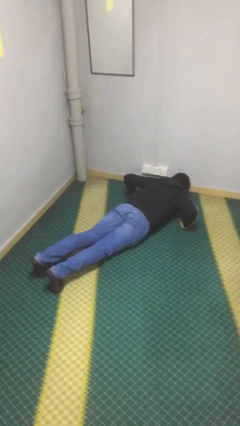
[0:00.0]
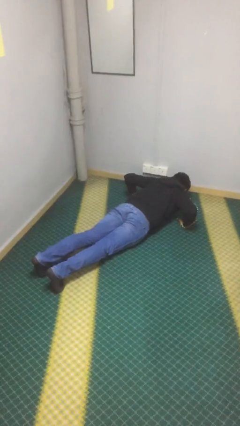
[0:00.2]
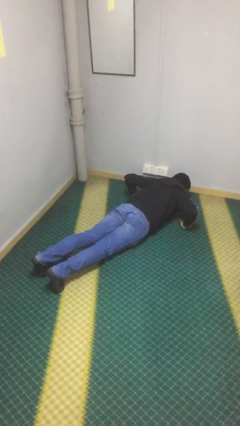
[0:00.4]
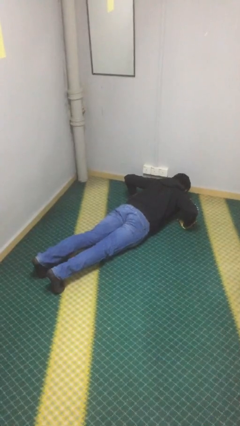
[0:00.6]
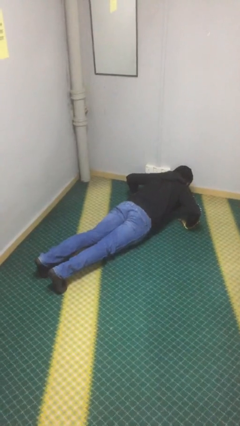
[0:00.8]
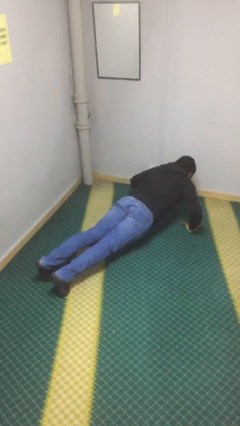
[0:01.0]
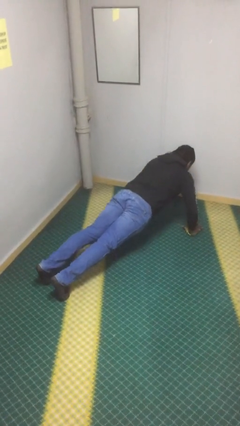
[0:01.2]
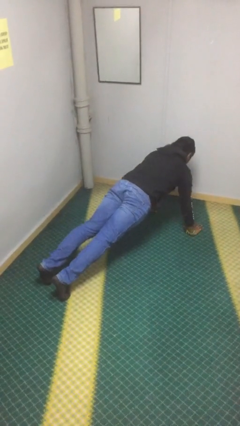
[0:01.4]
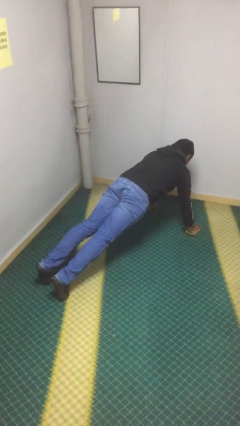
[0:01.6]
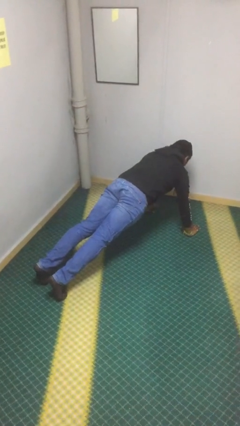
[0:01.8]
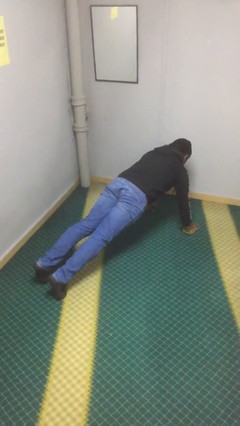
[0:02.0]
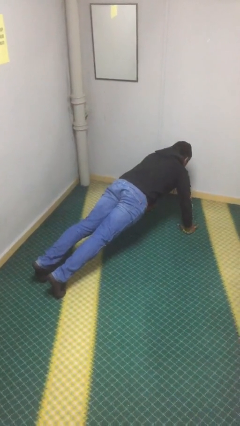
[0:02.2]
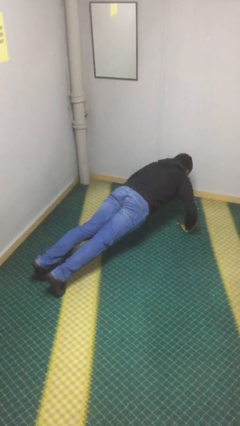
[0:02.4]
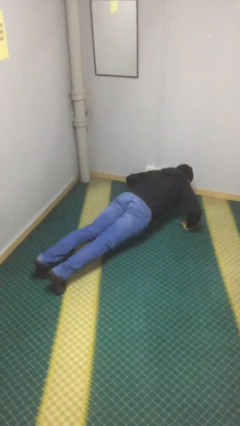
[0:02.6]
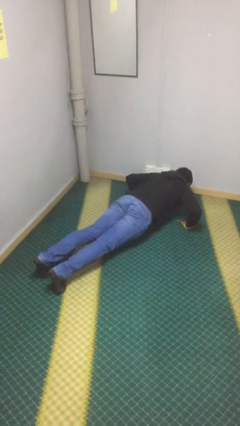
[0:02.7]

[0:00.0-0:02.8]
person exercises with pushup

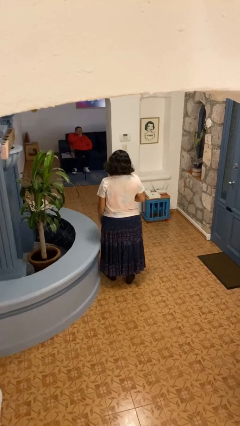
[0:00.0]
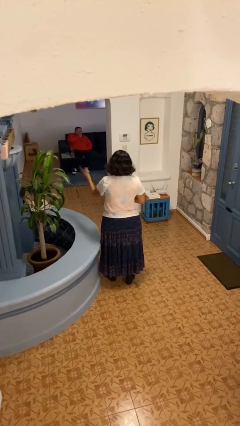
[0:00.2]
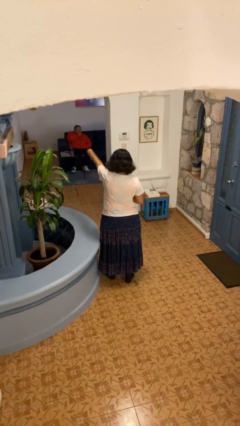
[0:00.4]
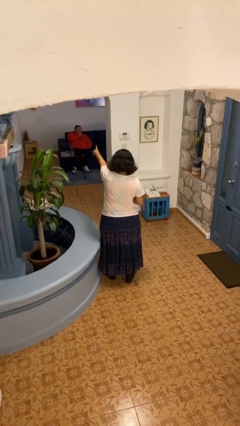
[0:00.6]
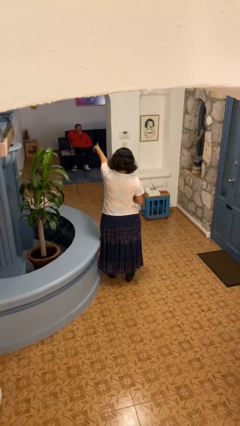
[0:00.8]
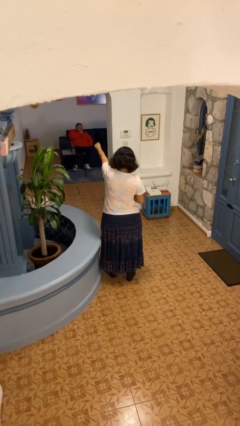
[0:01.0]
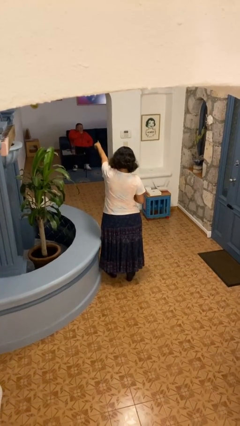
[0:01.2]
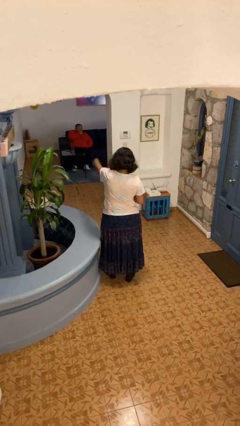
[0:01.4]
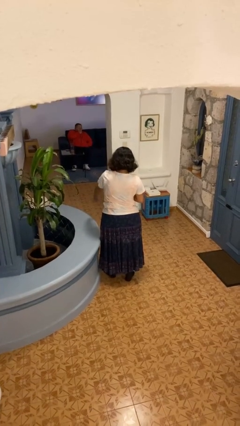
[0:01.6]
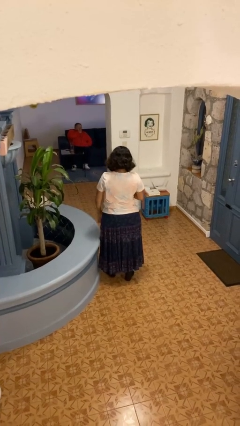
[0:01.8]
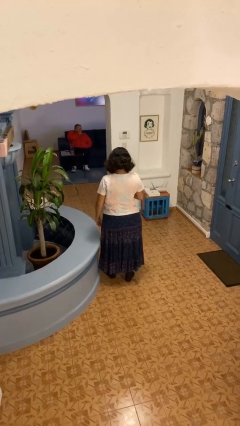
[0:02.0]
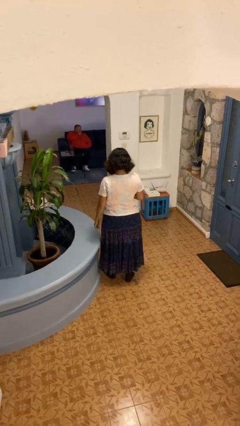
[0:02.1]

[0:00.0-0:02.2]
person points at person

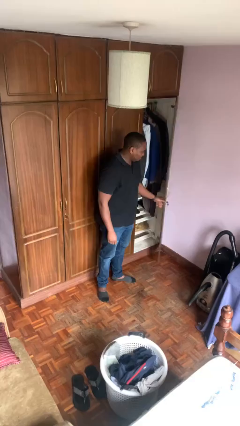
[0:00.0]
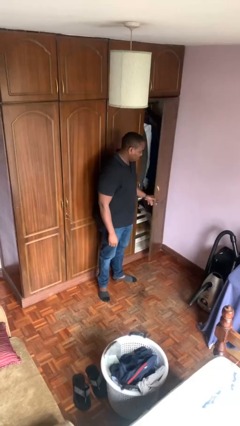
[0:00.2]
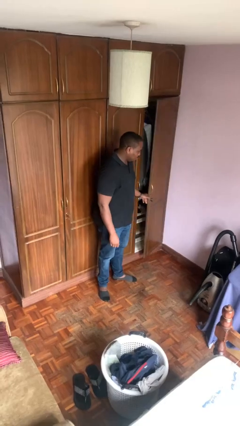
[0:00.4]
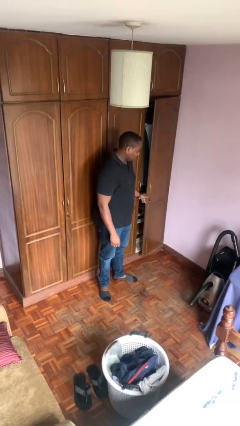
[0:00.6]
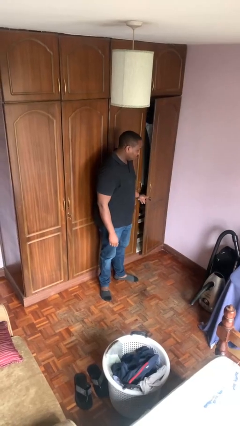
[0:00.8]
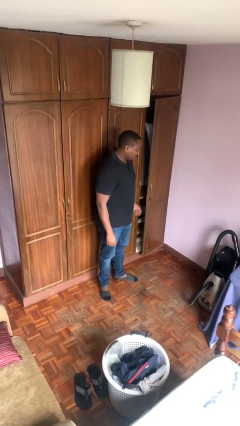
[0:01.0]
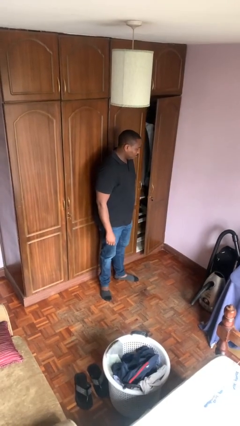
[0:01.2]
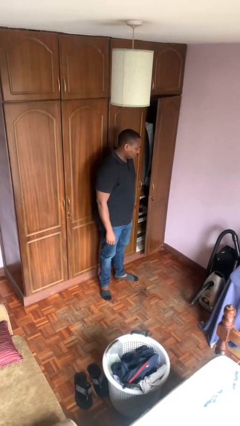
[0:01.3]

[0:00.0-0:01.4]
person closes closet door

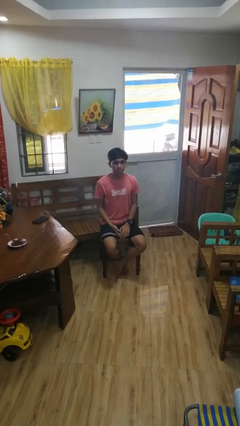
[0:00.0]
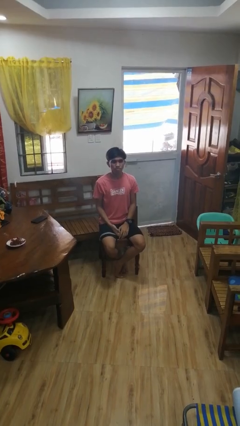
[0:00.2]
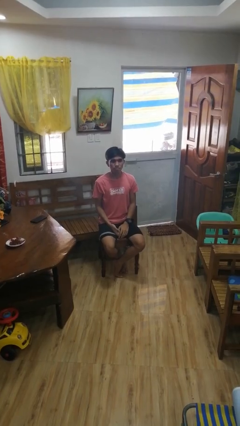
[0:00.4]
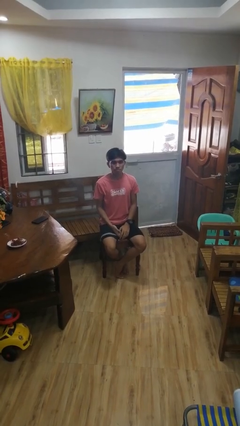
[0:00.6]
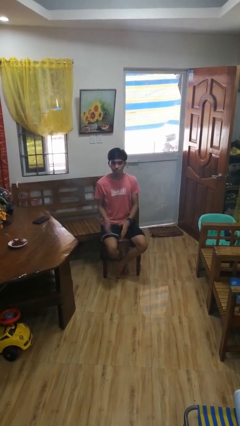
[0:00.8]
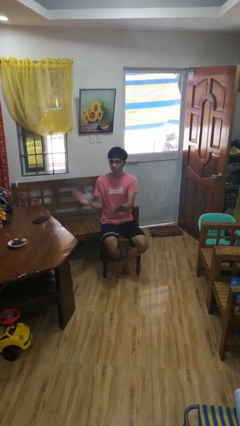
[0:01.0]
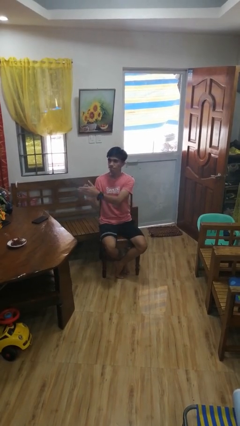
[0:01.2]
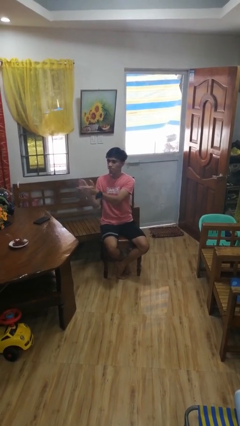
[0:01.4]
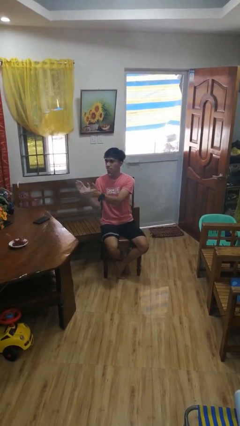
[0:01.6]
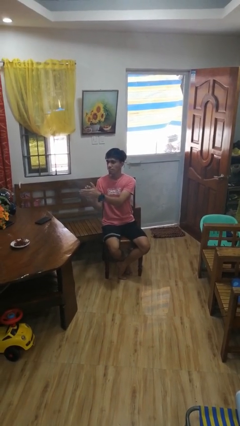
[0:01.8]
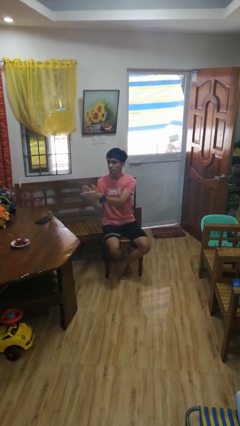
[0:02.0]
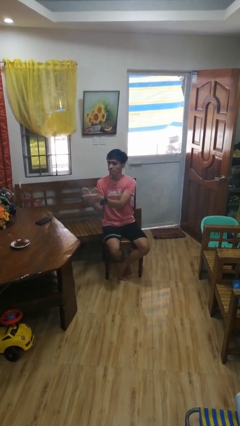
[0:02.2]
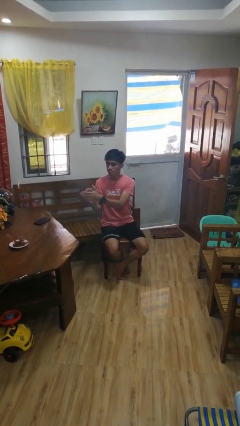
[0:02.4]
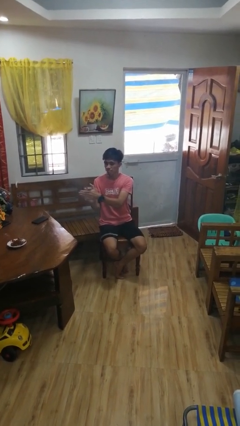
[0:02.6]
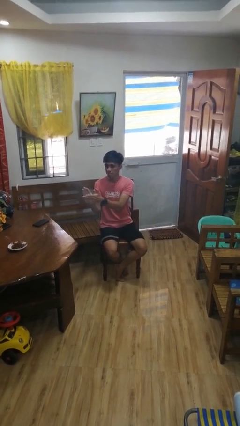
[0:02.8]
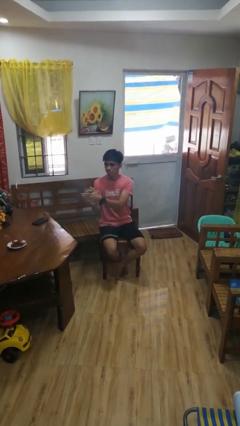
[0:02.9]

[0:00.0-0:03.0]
person claps hands

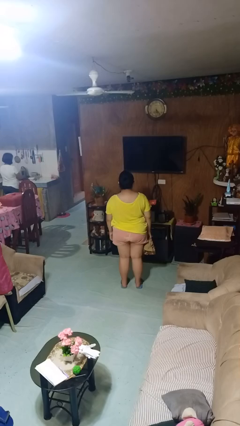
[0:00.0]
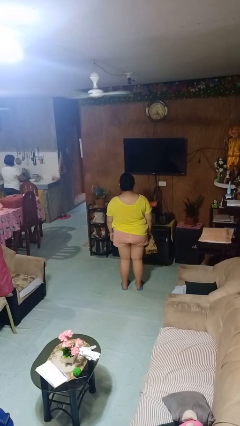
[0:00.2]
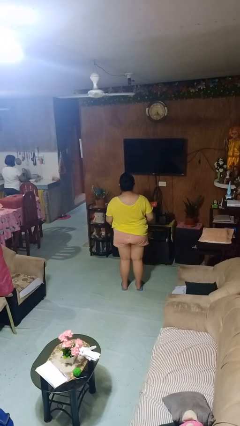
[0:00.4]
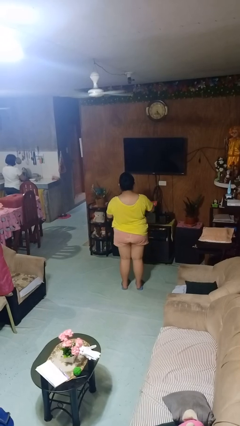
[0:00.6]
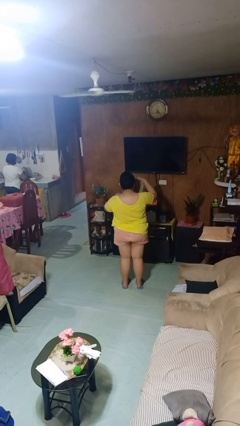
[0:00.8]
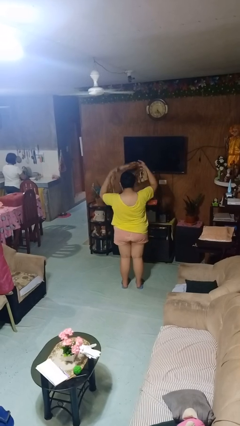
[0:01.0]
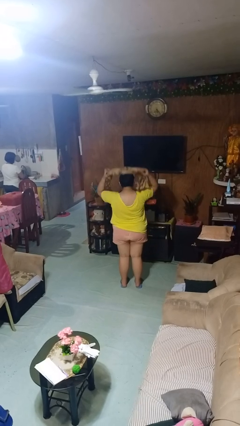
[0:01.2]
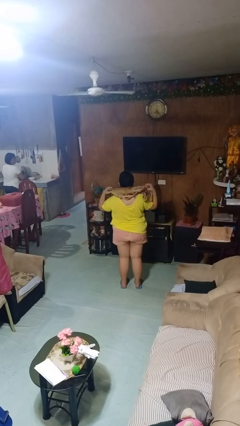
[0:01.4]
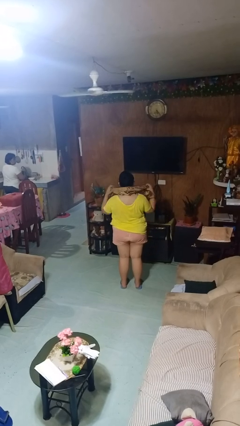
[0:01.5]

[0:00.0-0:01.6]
person puts on scarf

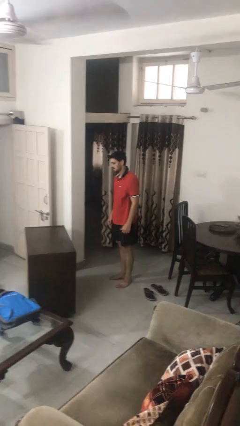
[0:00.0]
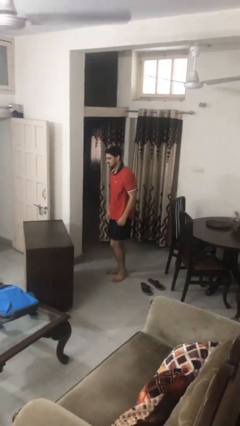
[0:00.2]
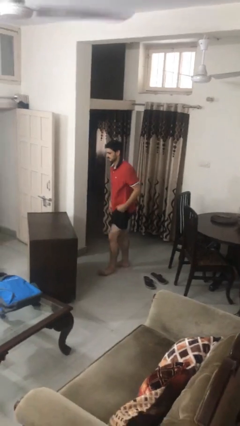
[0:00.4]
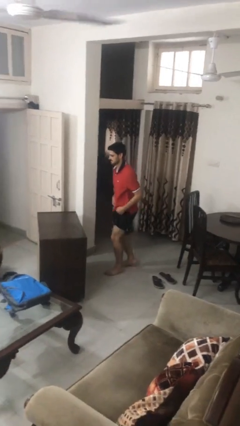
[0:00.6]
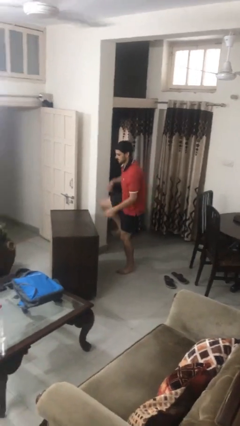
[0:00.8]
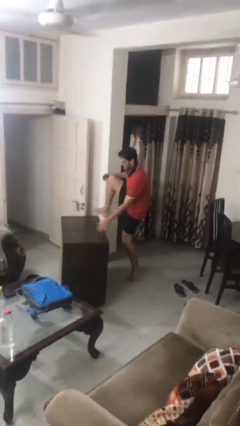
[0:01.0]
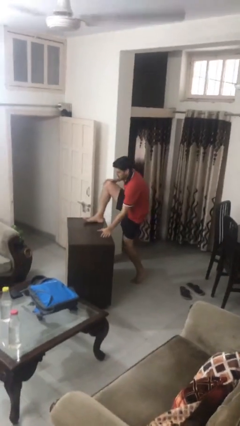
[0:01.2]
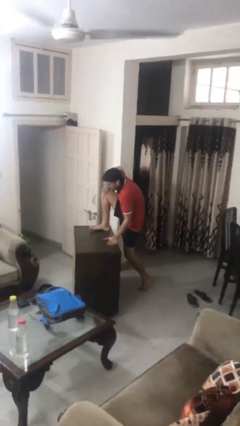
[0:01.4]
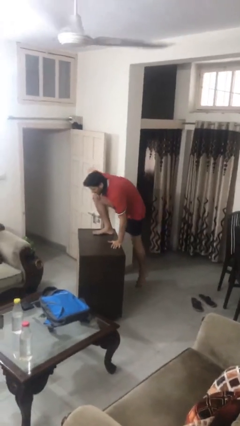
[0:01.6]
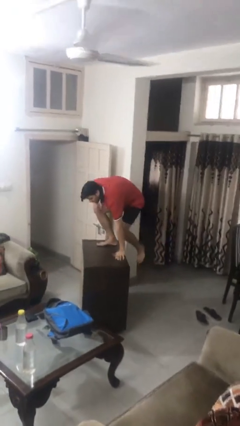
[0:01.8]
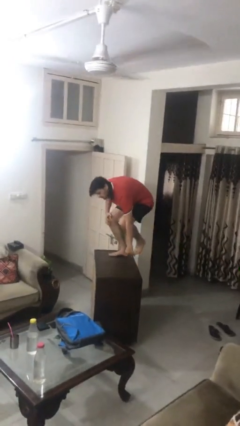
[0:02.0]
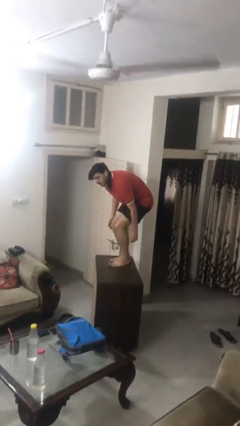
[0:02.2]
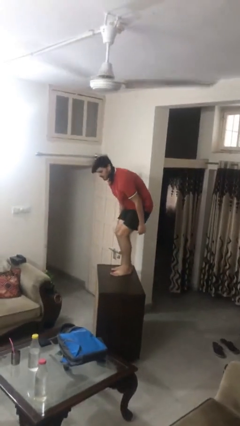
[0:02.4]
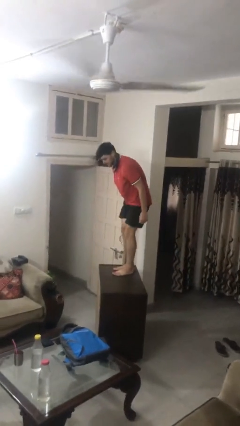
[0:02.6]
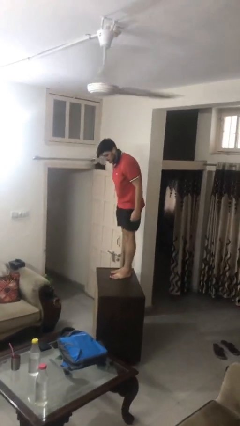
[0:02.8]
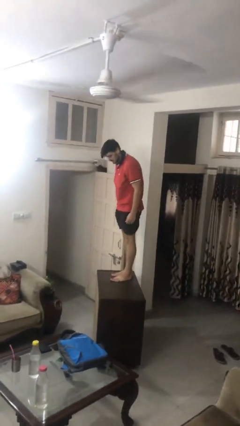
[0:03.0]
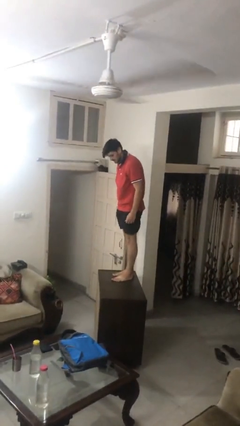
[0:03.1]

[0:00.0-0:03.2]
person climbs on table

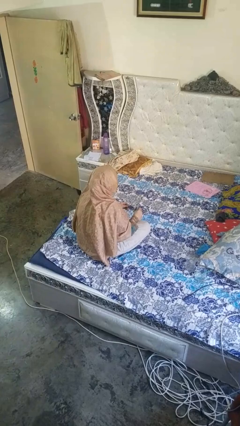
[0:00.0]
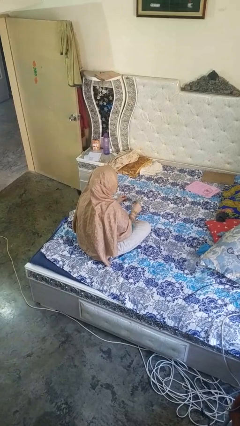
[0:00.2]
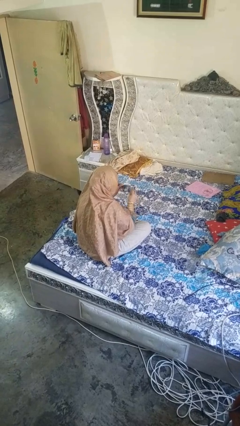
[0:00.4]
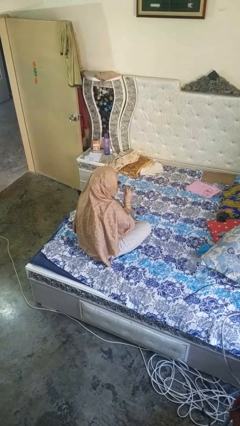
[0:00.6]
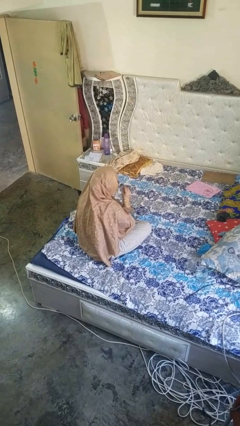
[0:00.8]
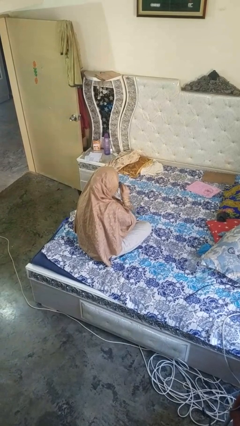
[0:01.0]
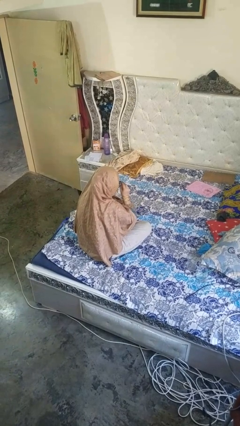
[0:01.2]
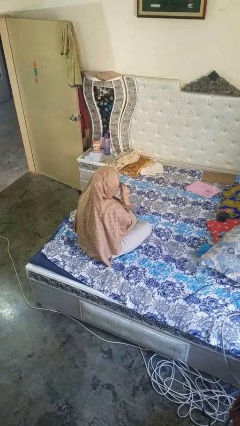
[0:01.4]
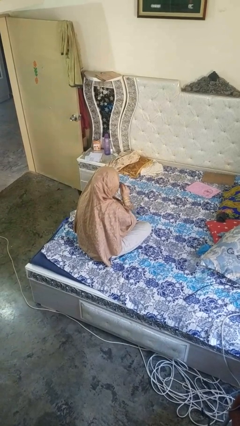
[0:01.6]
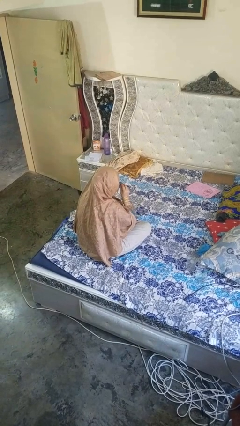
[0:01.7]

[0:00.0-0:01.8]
person puts on glasses

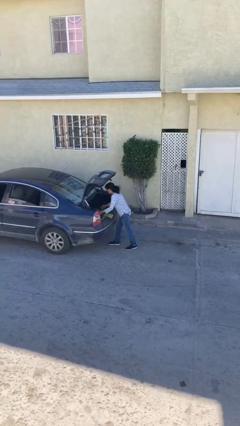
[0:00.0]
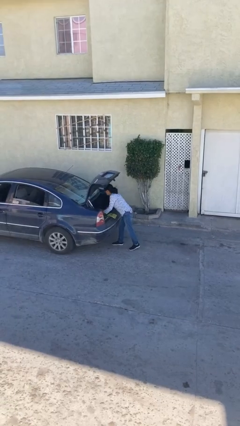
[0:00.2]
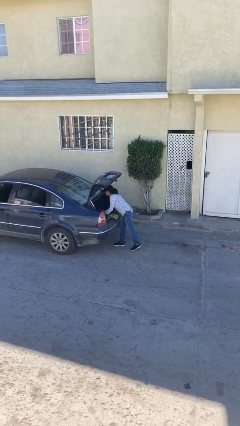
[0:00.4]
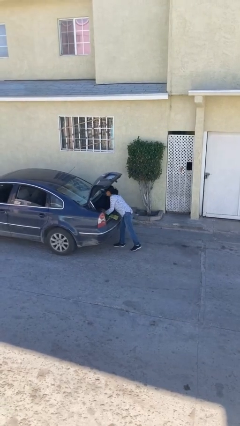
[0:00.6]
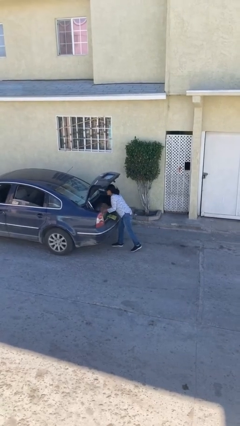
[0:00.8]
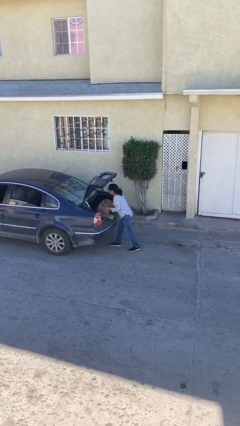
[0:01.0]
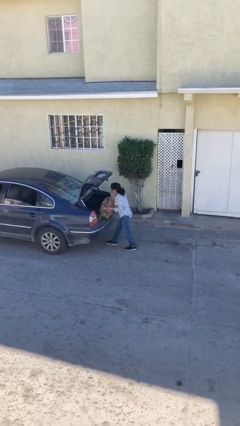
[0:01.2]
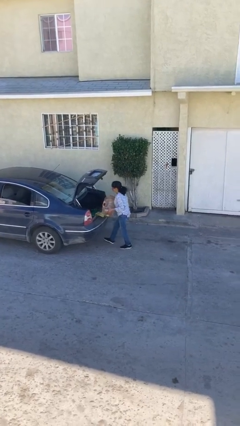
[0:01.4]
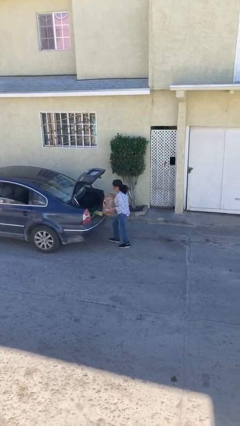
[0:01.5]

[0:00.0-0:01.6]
person unloads car
